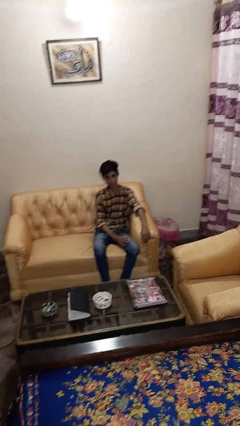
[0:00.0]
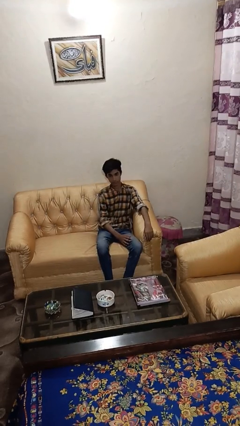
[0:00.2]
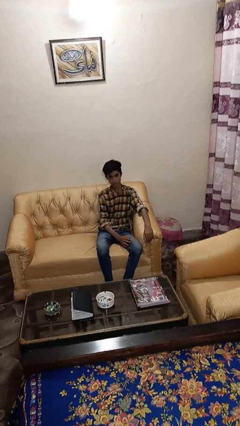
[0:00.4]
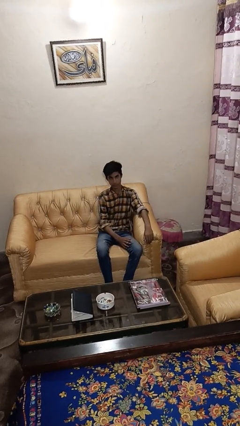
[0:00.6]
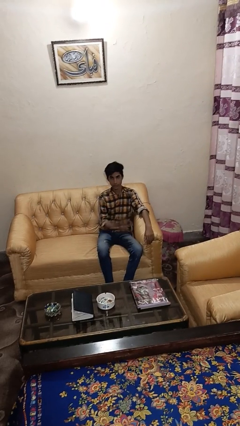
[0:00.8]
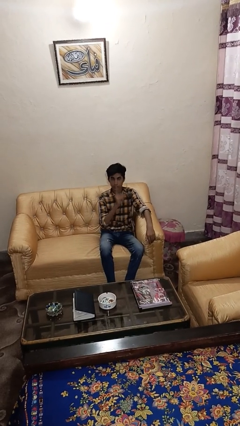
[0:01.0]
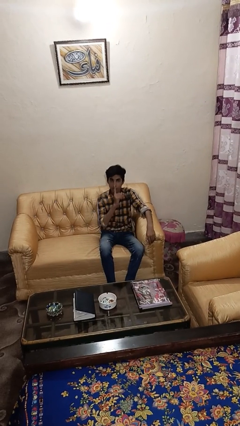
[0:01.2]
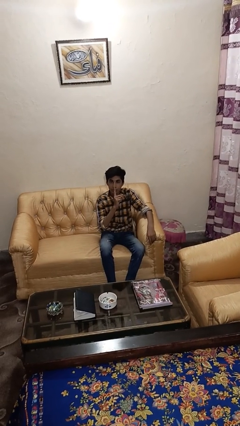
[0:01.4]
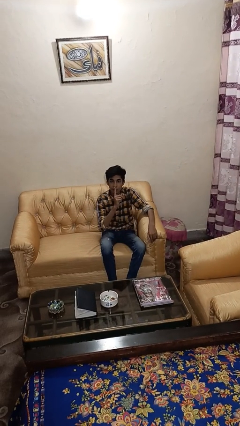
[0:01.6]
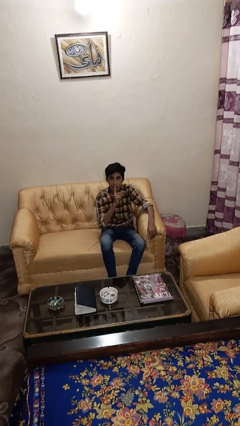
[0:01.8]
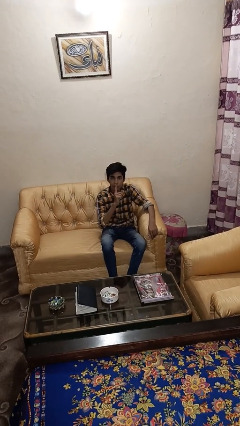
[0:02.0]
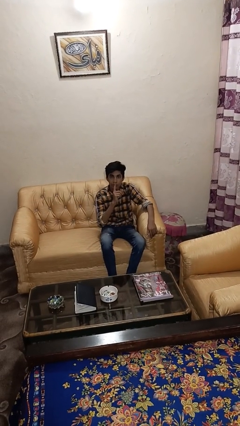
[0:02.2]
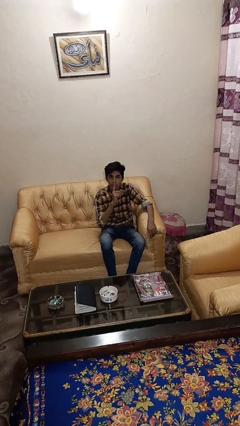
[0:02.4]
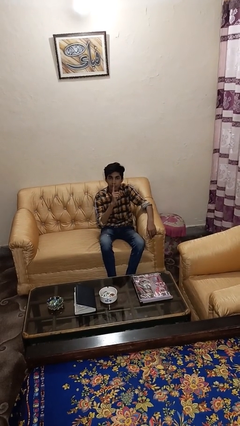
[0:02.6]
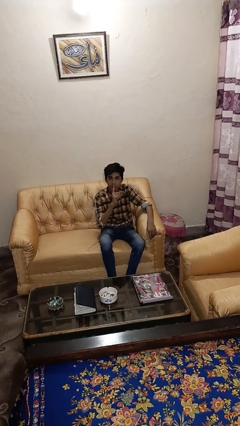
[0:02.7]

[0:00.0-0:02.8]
person gestures be quiet

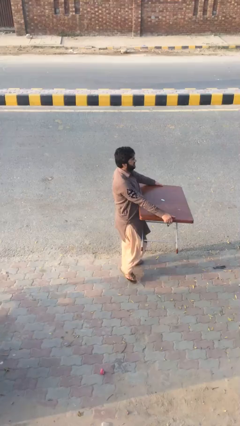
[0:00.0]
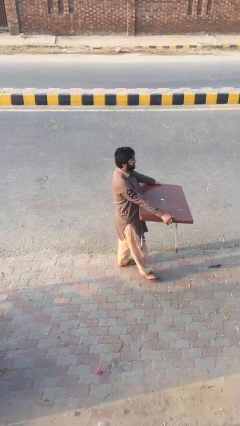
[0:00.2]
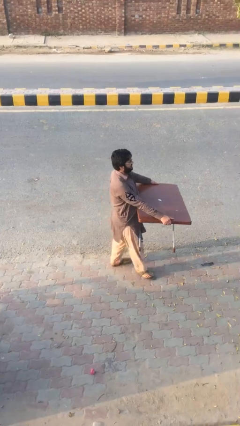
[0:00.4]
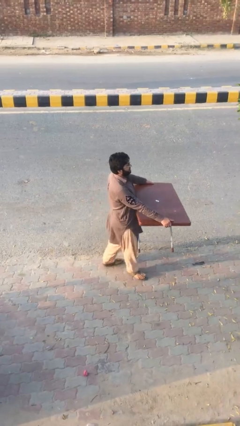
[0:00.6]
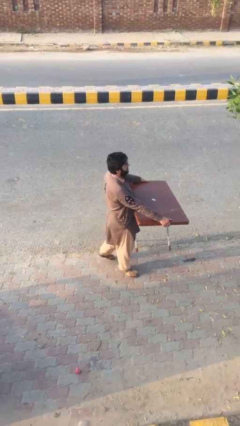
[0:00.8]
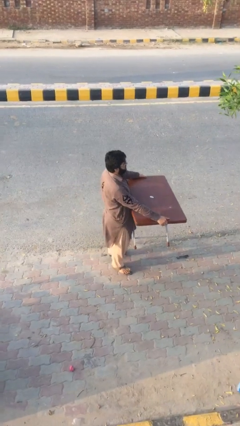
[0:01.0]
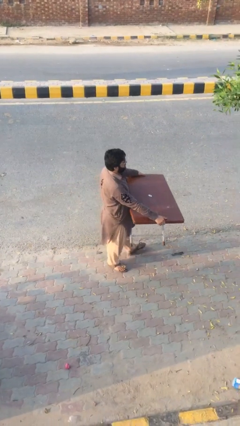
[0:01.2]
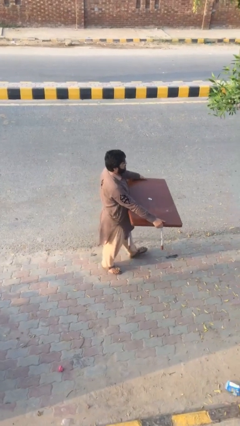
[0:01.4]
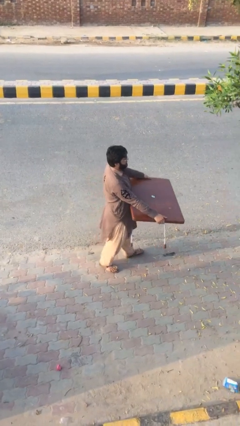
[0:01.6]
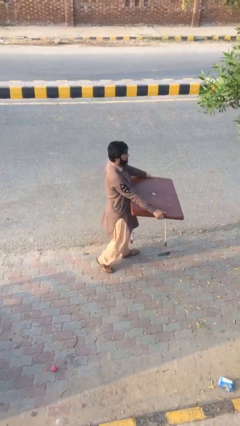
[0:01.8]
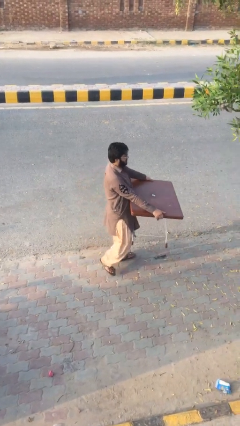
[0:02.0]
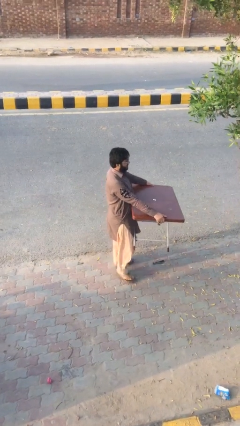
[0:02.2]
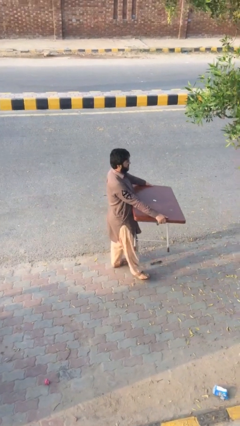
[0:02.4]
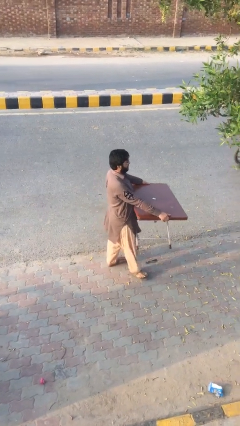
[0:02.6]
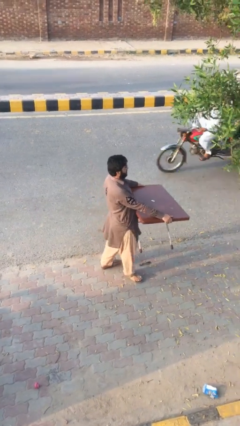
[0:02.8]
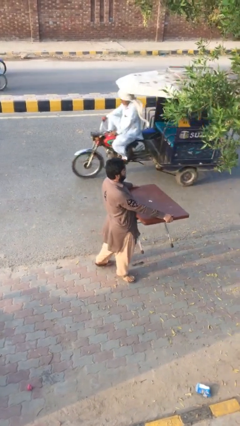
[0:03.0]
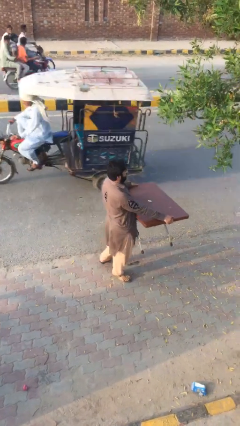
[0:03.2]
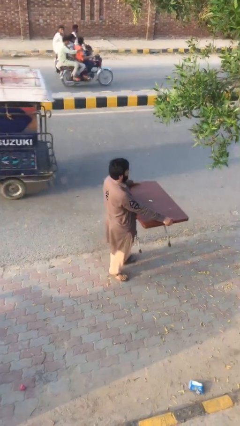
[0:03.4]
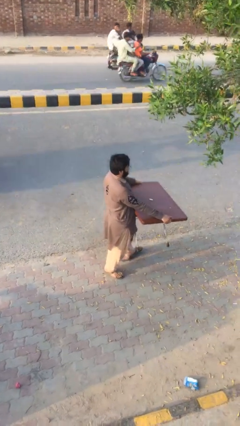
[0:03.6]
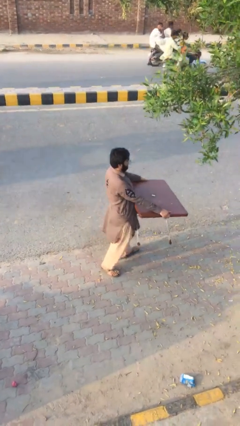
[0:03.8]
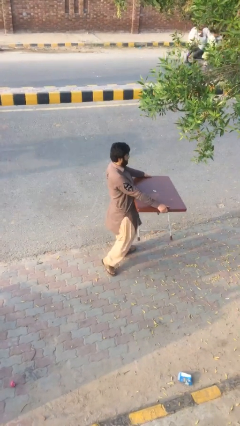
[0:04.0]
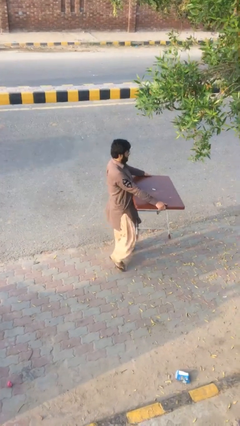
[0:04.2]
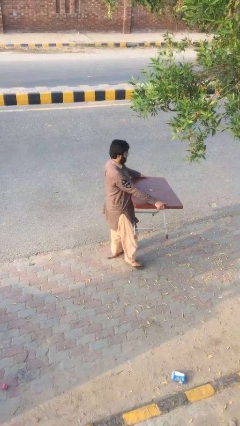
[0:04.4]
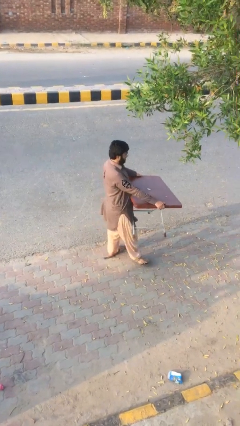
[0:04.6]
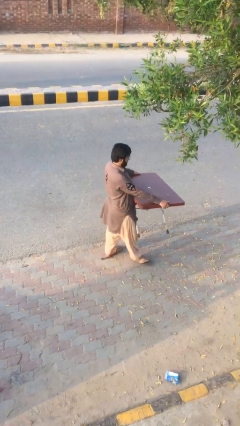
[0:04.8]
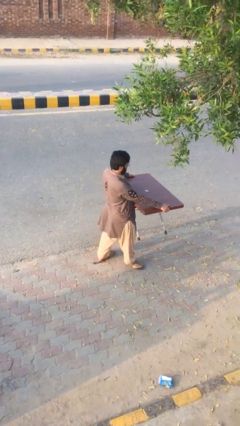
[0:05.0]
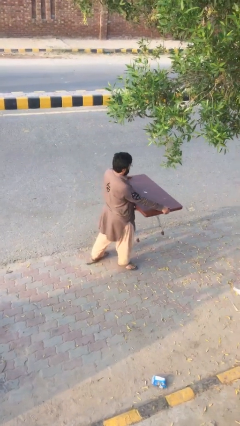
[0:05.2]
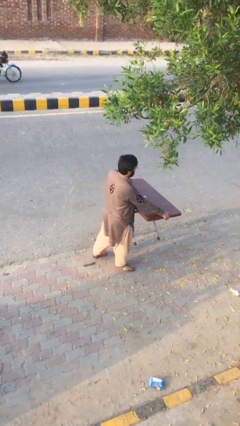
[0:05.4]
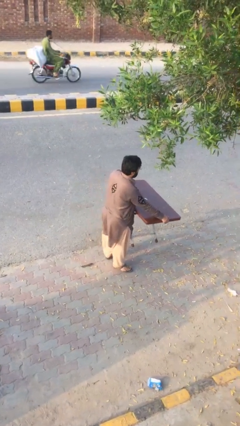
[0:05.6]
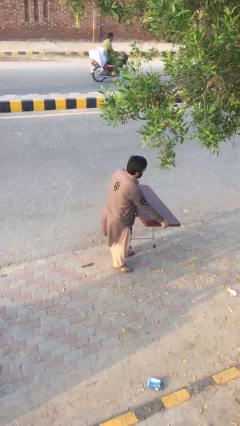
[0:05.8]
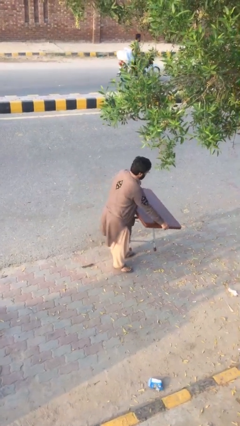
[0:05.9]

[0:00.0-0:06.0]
person carries heavy object

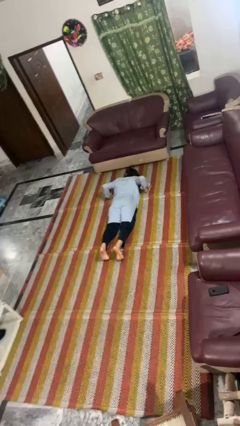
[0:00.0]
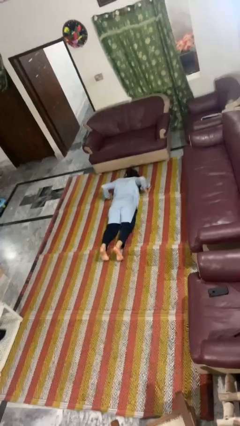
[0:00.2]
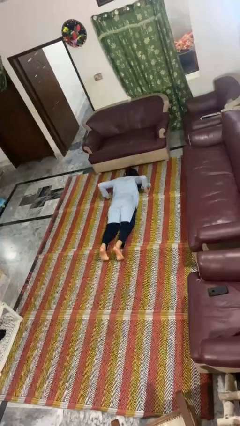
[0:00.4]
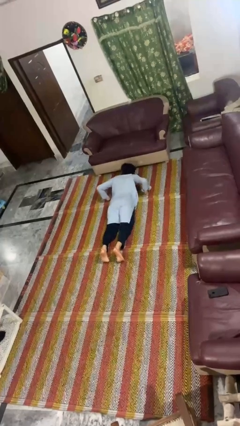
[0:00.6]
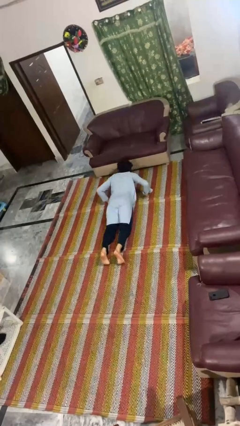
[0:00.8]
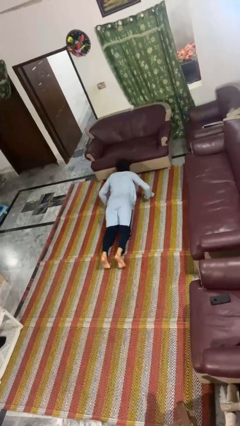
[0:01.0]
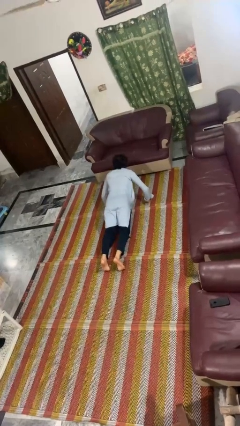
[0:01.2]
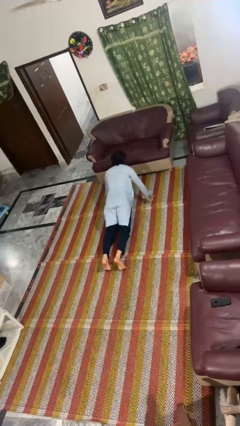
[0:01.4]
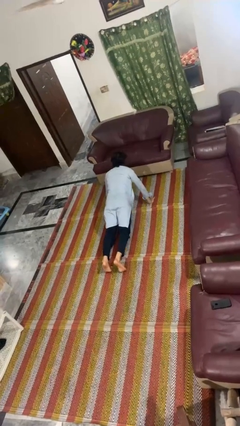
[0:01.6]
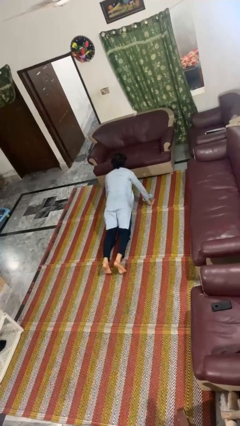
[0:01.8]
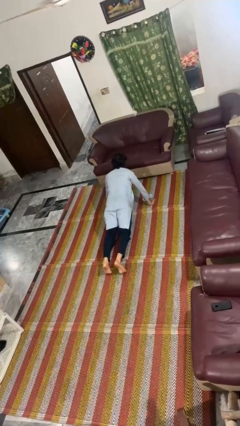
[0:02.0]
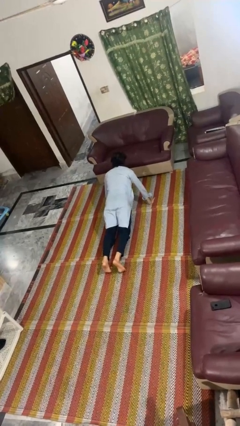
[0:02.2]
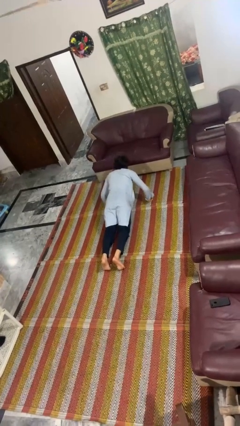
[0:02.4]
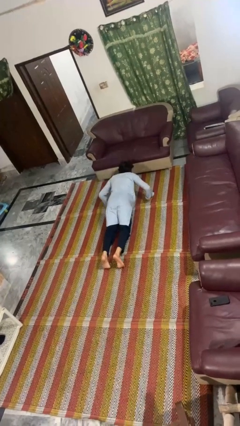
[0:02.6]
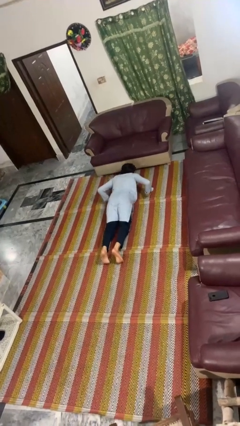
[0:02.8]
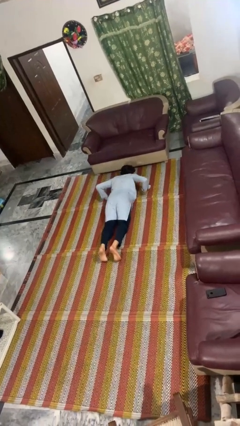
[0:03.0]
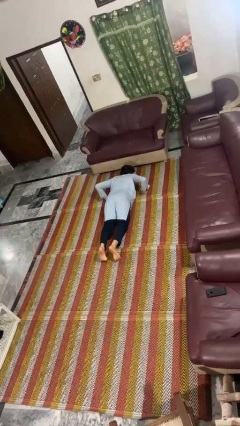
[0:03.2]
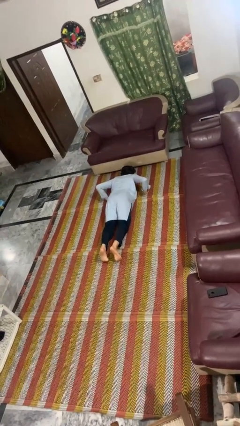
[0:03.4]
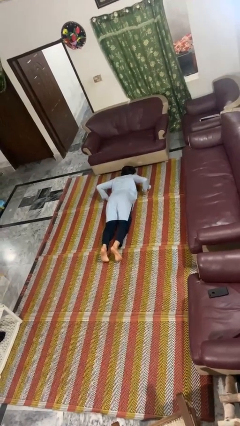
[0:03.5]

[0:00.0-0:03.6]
person exercises with pushup

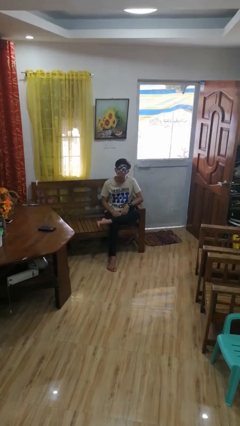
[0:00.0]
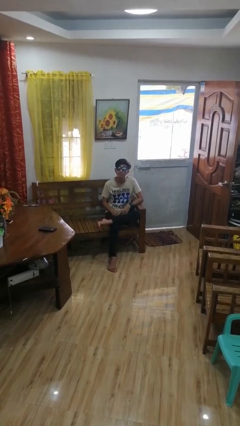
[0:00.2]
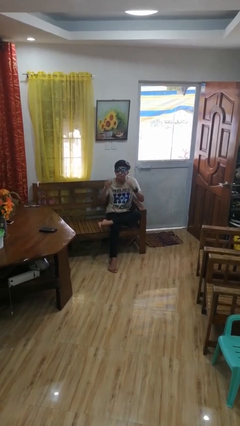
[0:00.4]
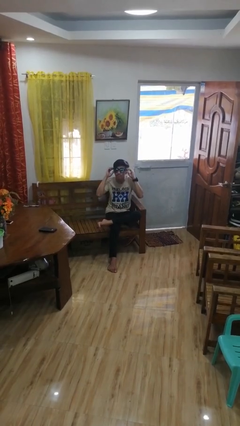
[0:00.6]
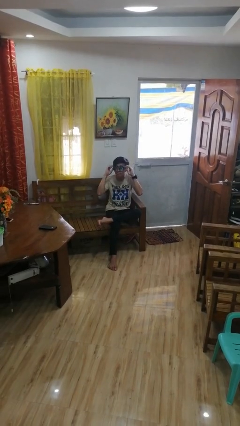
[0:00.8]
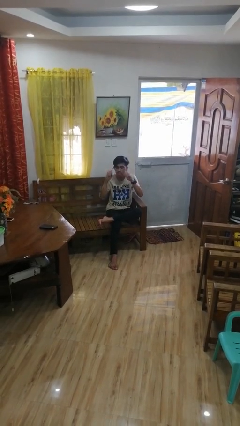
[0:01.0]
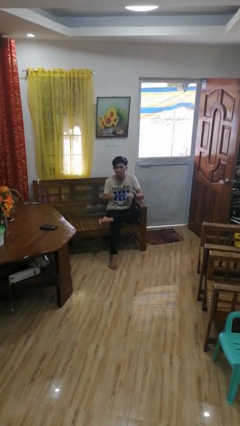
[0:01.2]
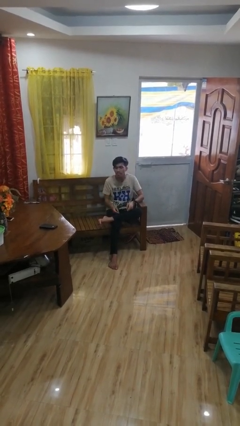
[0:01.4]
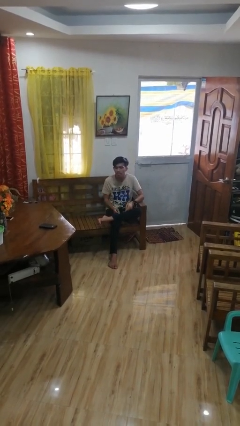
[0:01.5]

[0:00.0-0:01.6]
person takes off sunglasses

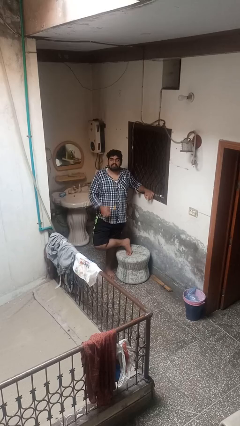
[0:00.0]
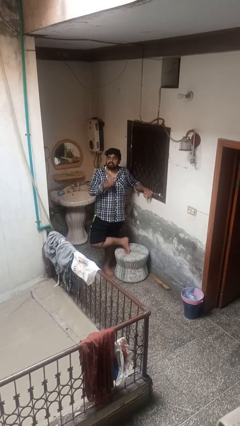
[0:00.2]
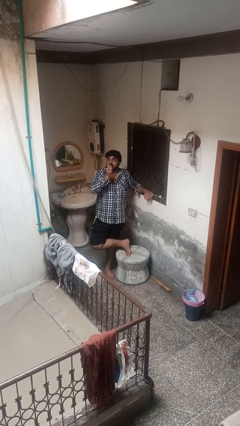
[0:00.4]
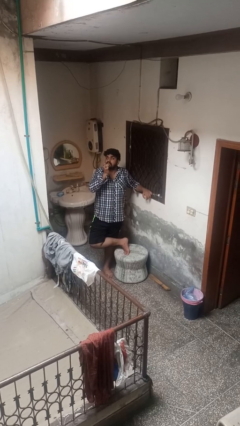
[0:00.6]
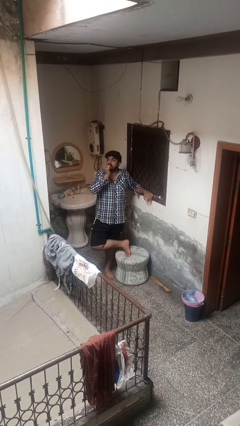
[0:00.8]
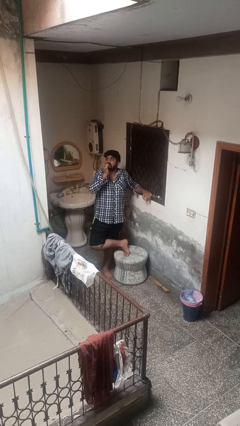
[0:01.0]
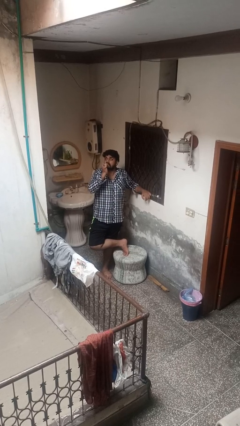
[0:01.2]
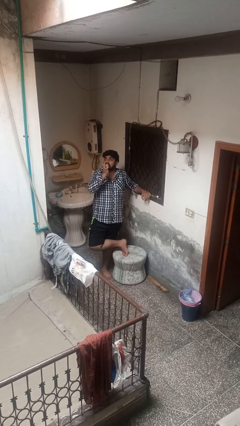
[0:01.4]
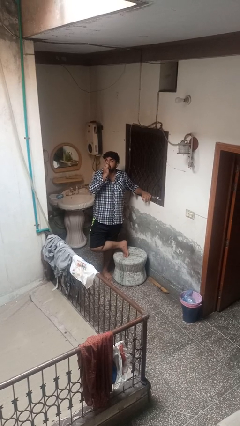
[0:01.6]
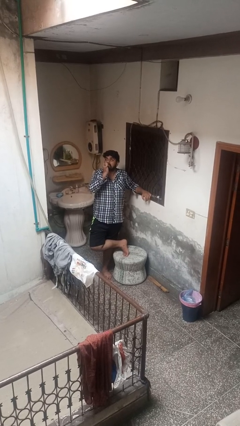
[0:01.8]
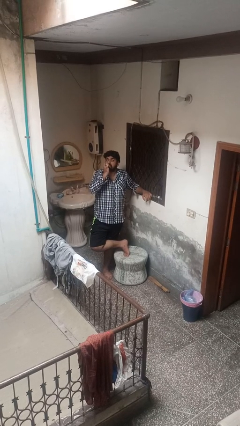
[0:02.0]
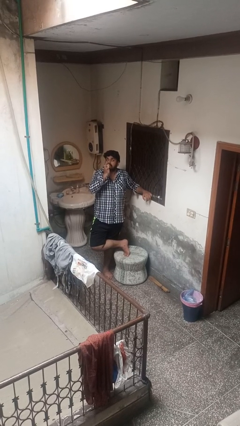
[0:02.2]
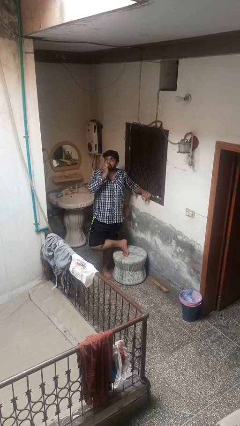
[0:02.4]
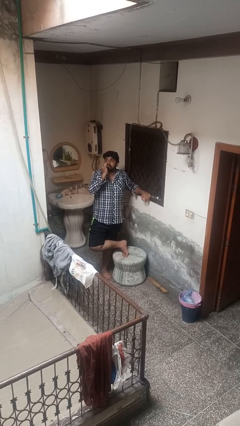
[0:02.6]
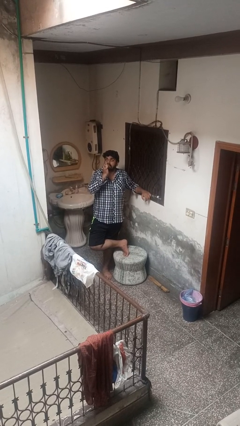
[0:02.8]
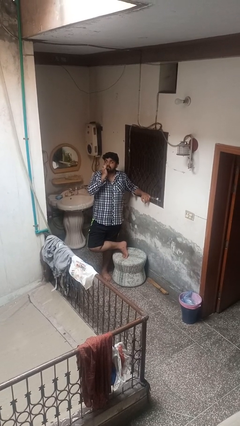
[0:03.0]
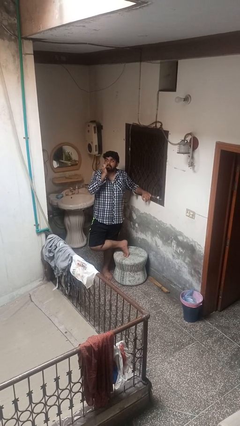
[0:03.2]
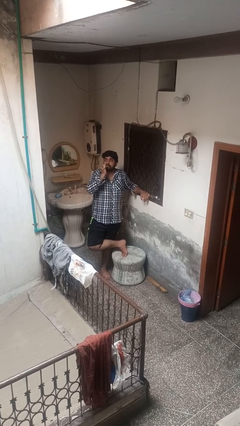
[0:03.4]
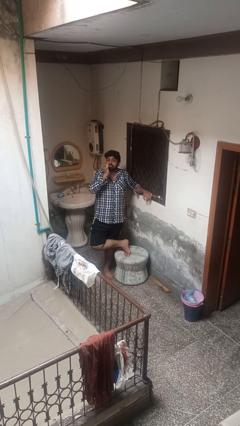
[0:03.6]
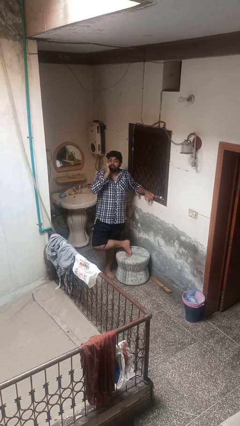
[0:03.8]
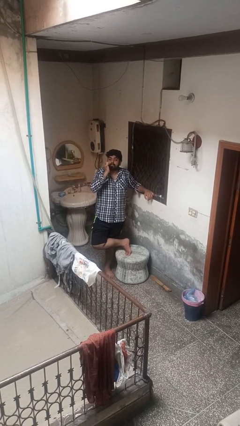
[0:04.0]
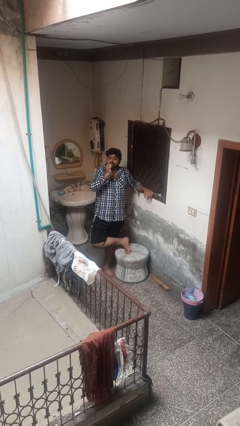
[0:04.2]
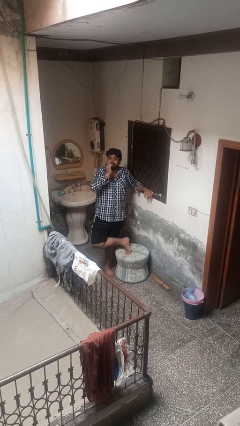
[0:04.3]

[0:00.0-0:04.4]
person brushes teeth
